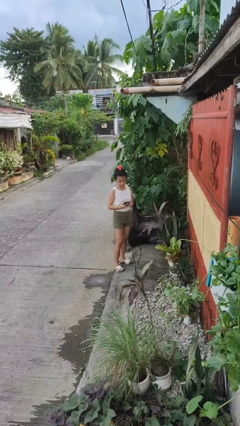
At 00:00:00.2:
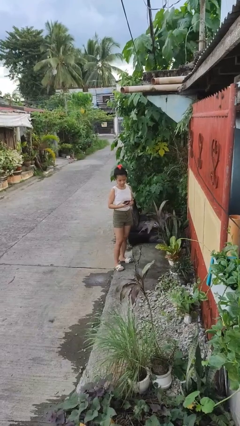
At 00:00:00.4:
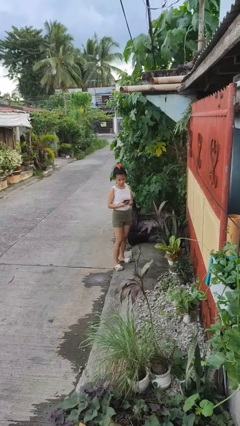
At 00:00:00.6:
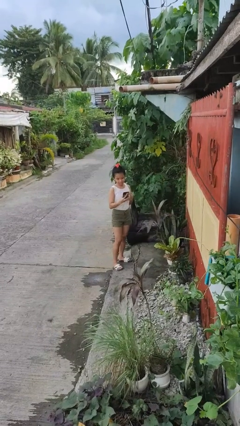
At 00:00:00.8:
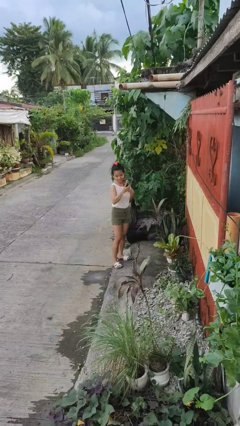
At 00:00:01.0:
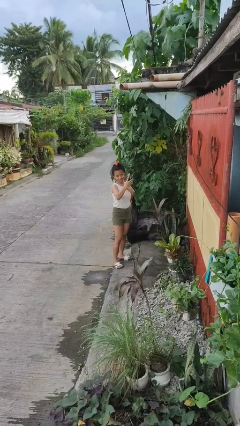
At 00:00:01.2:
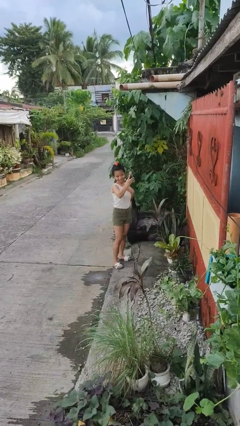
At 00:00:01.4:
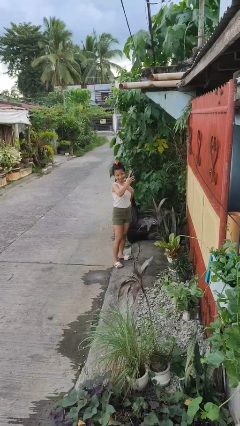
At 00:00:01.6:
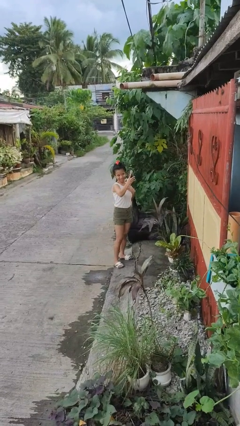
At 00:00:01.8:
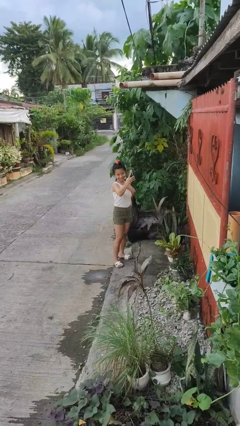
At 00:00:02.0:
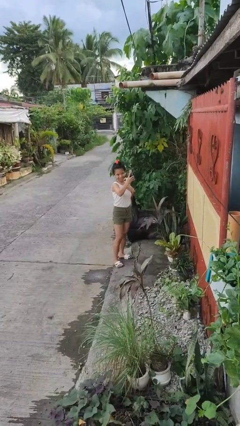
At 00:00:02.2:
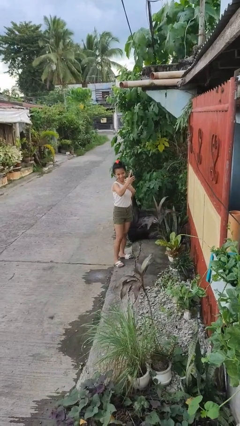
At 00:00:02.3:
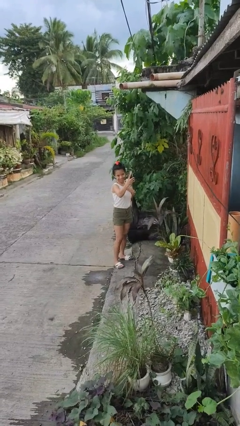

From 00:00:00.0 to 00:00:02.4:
person takes selfie

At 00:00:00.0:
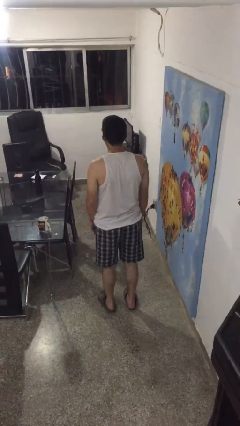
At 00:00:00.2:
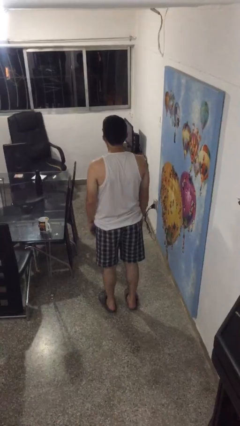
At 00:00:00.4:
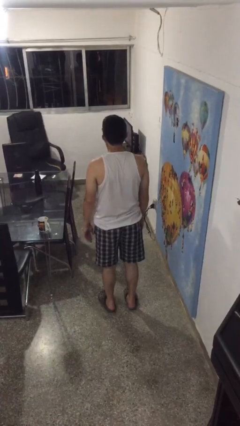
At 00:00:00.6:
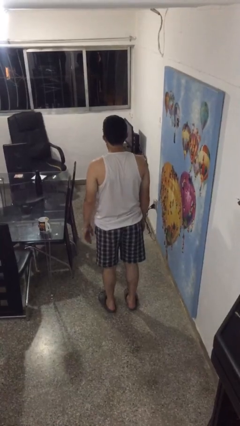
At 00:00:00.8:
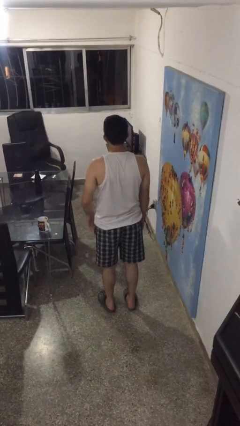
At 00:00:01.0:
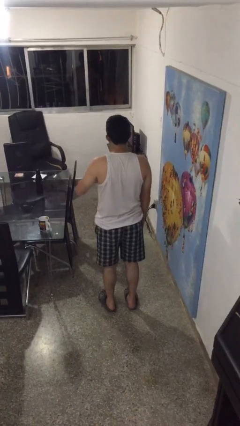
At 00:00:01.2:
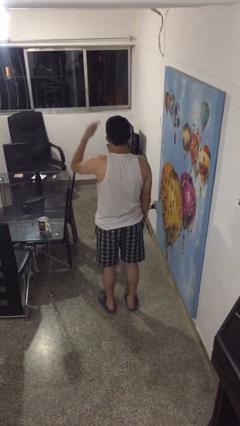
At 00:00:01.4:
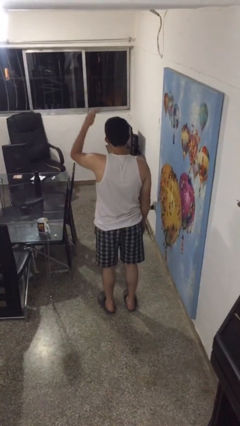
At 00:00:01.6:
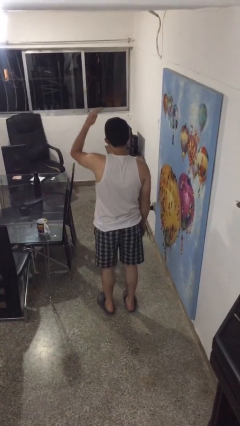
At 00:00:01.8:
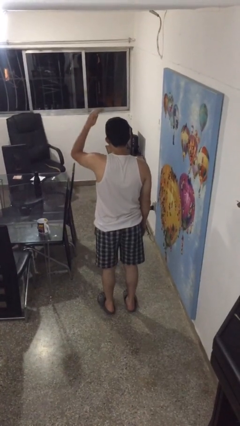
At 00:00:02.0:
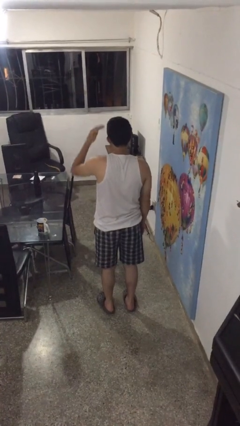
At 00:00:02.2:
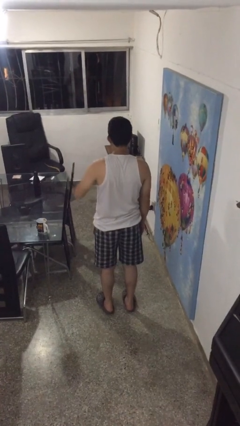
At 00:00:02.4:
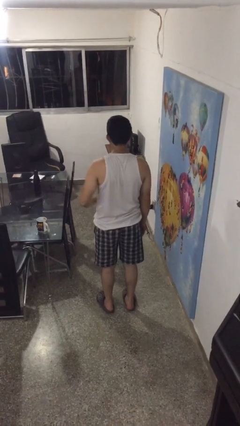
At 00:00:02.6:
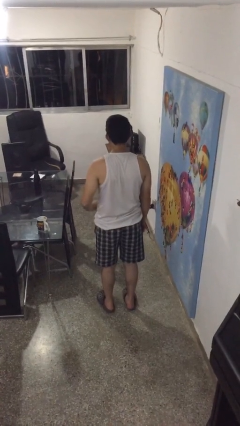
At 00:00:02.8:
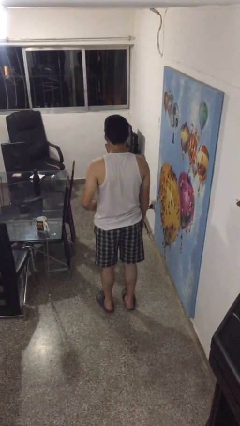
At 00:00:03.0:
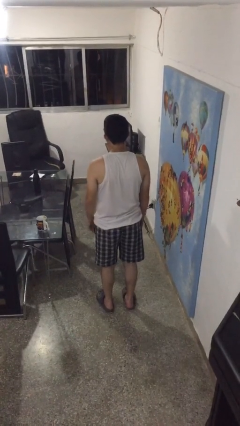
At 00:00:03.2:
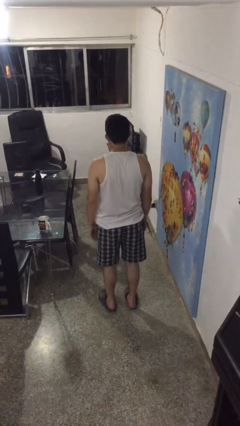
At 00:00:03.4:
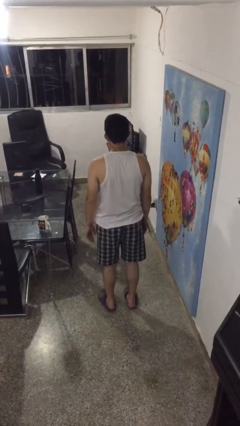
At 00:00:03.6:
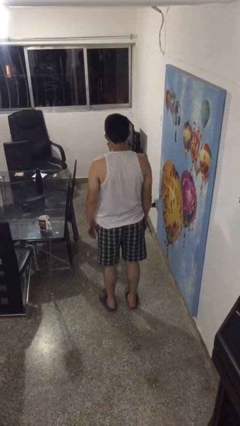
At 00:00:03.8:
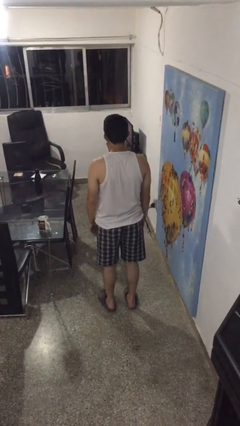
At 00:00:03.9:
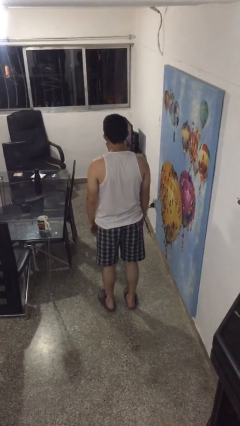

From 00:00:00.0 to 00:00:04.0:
person gestures swipe down

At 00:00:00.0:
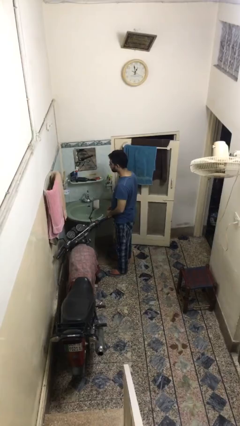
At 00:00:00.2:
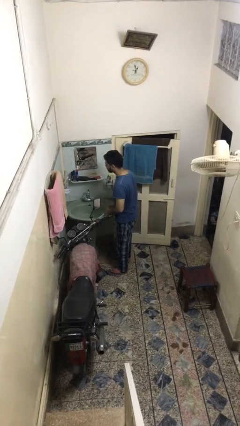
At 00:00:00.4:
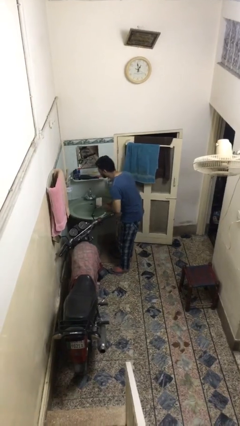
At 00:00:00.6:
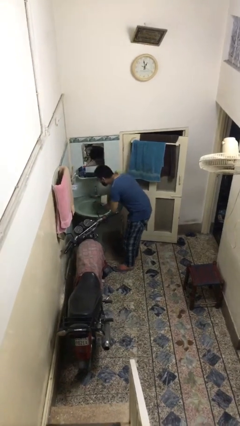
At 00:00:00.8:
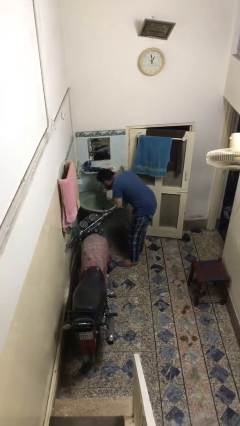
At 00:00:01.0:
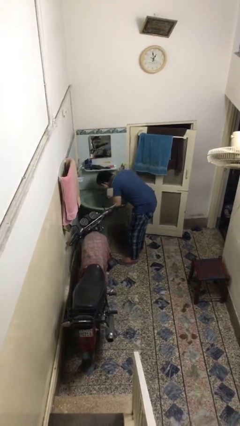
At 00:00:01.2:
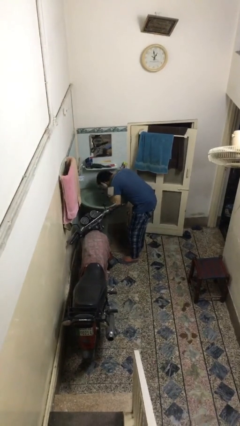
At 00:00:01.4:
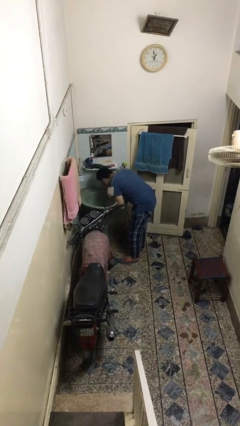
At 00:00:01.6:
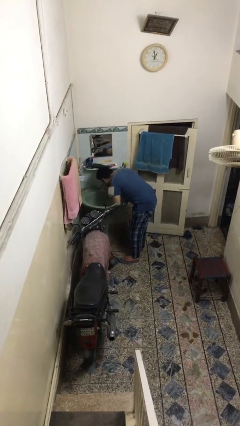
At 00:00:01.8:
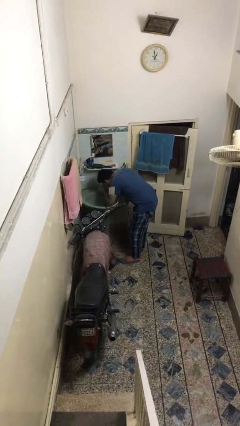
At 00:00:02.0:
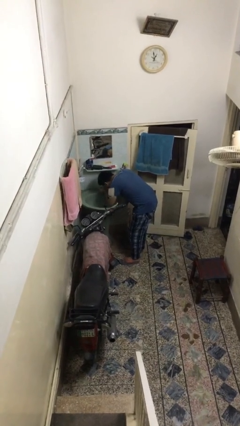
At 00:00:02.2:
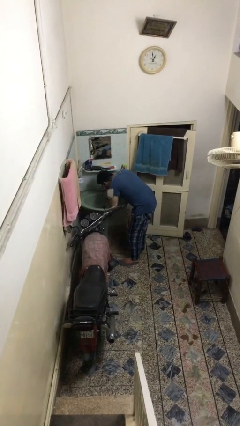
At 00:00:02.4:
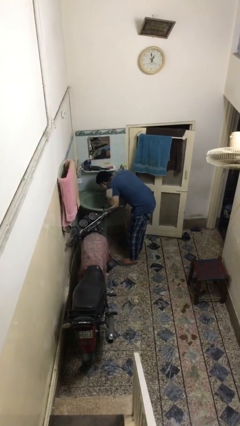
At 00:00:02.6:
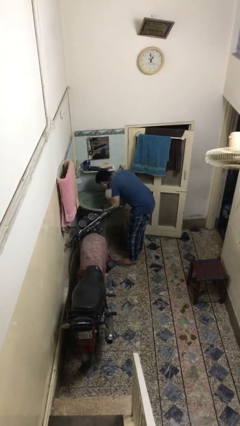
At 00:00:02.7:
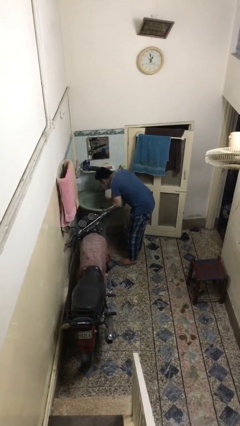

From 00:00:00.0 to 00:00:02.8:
person washes face

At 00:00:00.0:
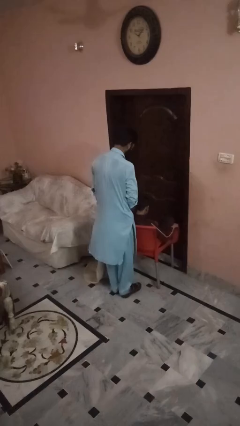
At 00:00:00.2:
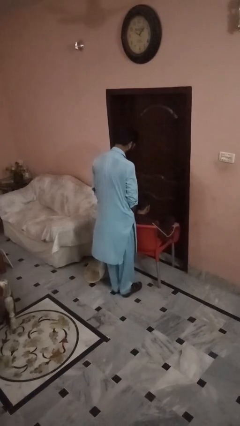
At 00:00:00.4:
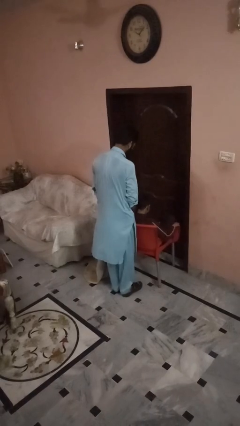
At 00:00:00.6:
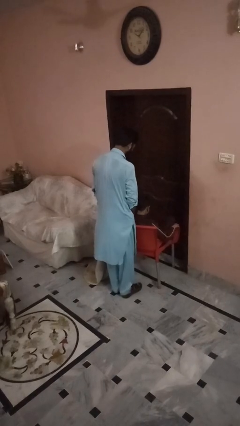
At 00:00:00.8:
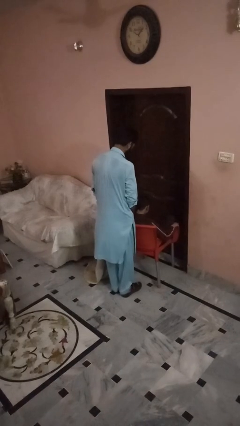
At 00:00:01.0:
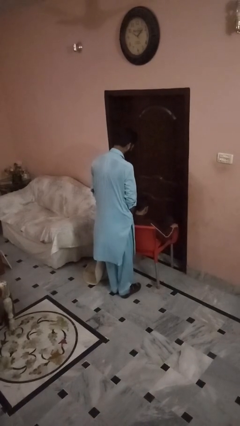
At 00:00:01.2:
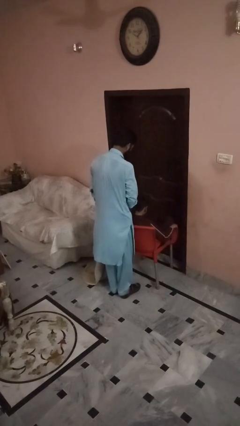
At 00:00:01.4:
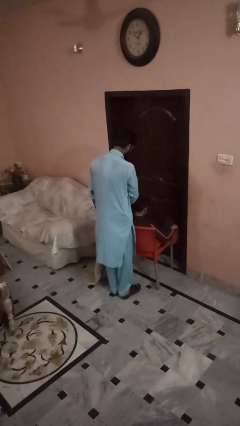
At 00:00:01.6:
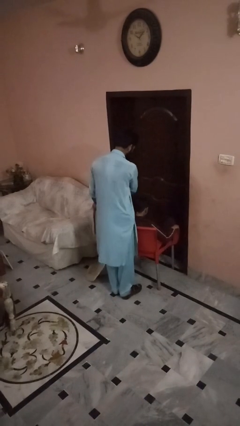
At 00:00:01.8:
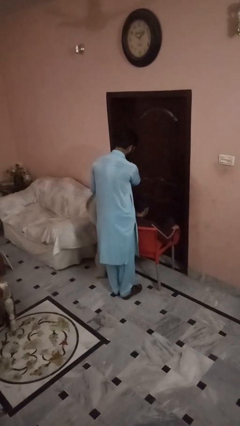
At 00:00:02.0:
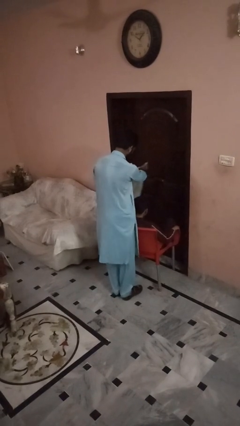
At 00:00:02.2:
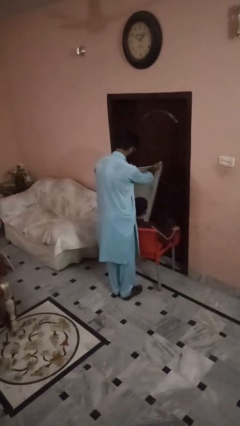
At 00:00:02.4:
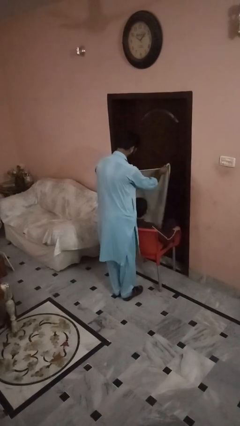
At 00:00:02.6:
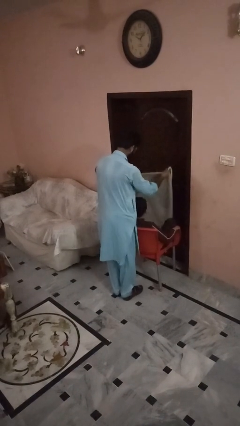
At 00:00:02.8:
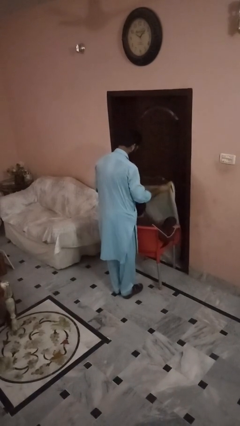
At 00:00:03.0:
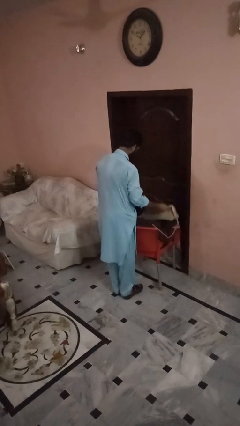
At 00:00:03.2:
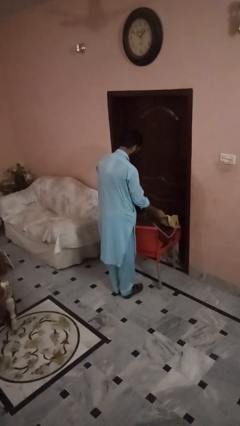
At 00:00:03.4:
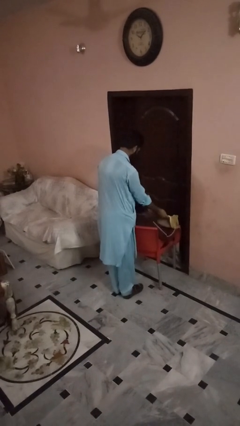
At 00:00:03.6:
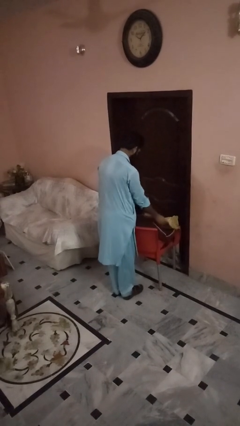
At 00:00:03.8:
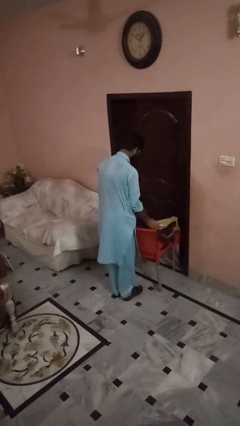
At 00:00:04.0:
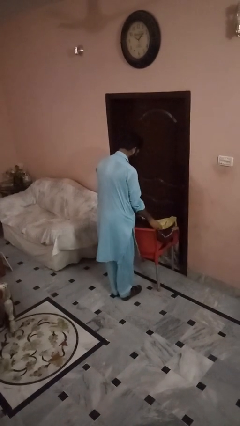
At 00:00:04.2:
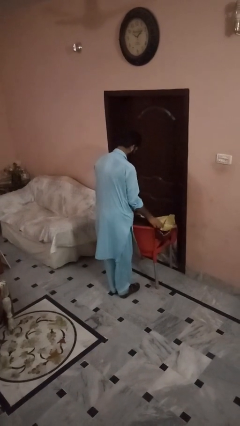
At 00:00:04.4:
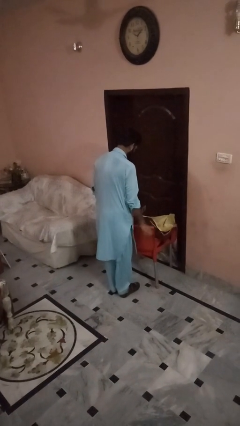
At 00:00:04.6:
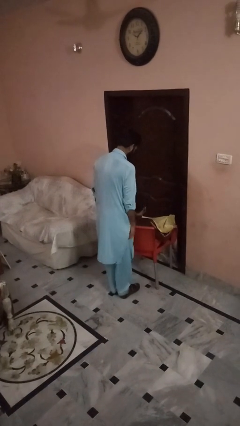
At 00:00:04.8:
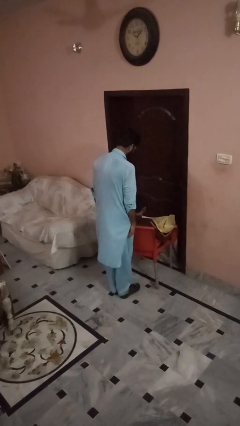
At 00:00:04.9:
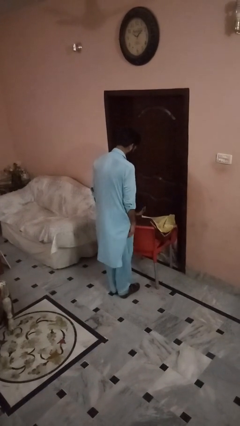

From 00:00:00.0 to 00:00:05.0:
person covers friend with blanket

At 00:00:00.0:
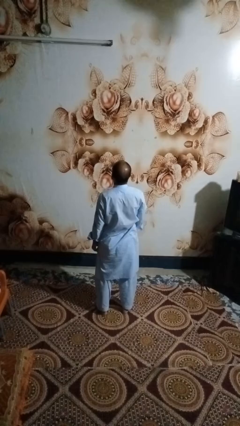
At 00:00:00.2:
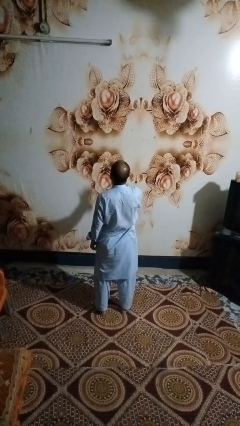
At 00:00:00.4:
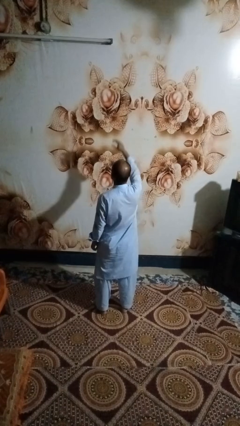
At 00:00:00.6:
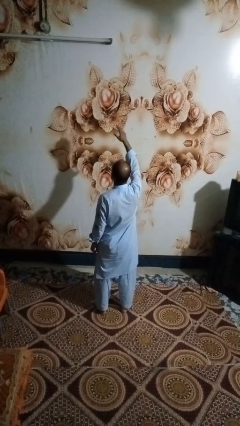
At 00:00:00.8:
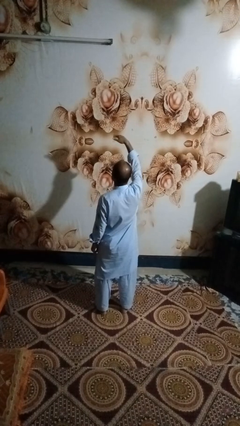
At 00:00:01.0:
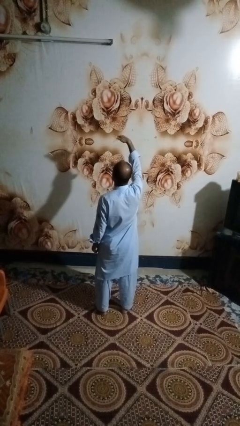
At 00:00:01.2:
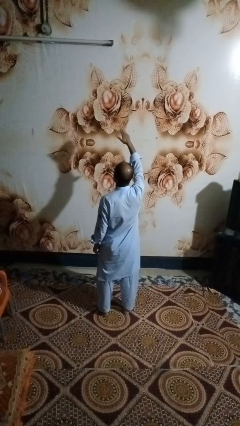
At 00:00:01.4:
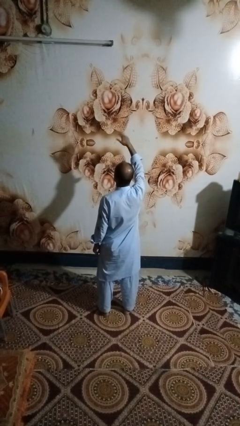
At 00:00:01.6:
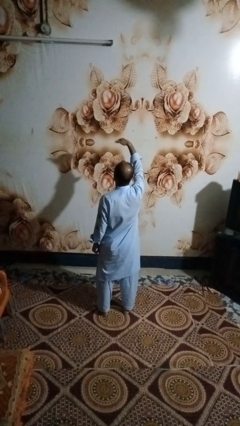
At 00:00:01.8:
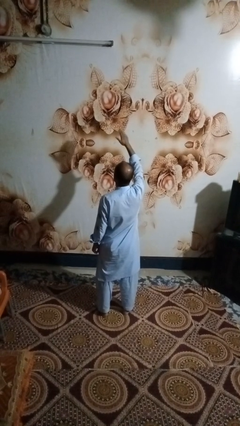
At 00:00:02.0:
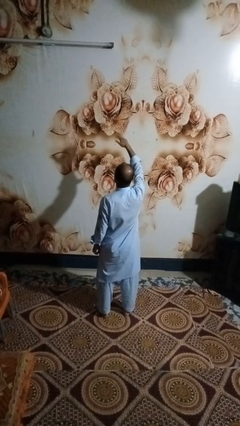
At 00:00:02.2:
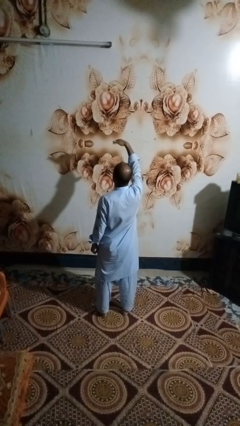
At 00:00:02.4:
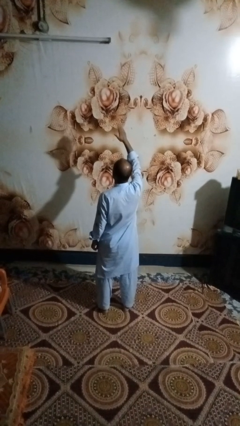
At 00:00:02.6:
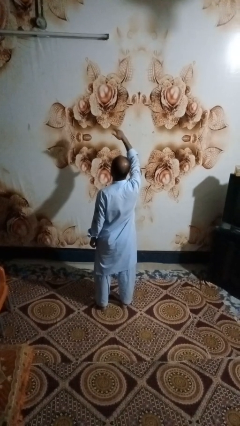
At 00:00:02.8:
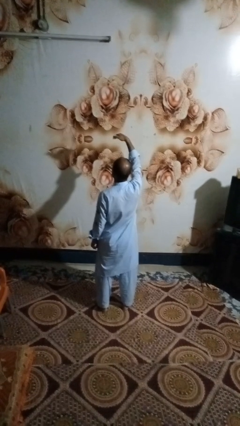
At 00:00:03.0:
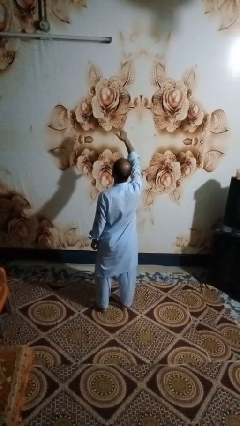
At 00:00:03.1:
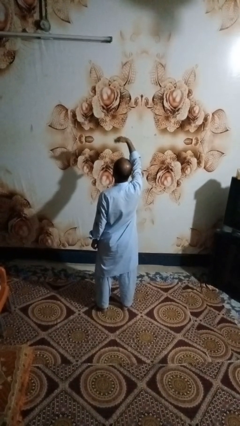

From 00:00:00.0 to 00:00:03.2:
person gestures come here

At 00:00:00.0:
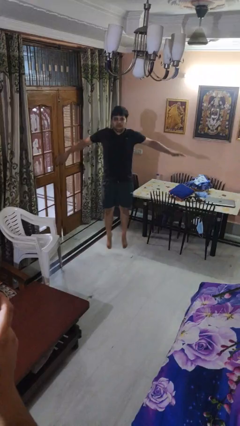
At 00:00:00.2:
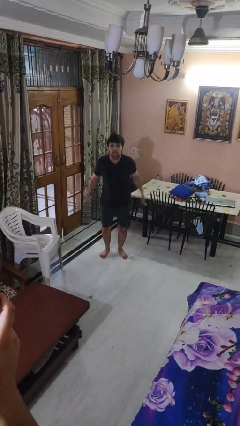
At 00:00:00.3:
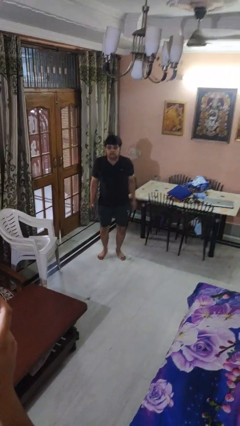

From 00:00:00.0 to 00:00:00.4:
person jumps
